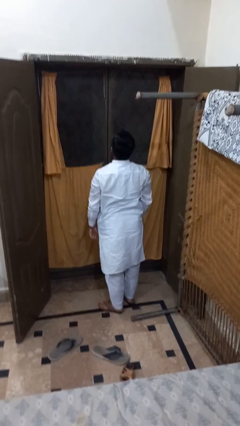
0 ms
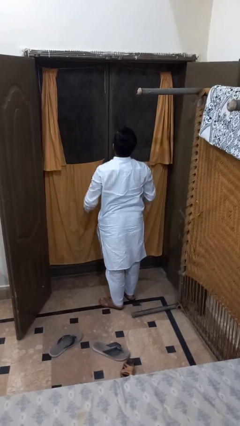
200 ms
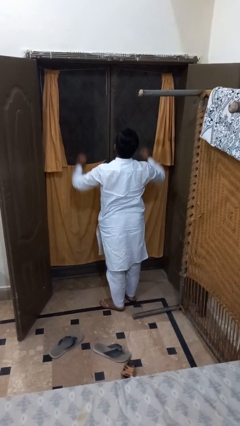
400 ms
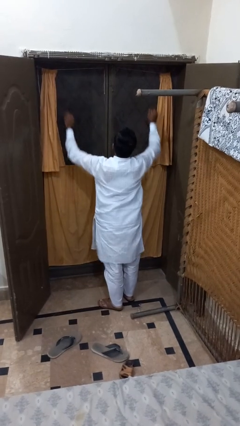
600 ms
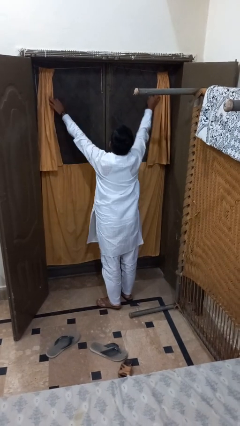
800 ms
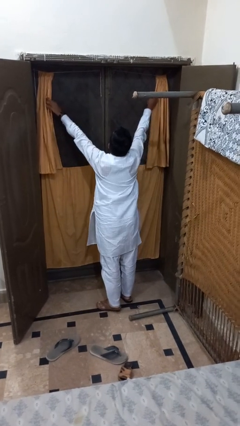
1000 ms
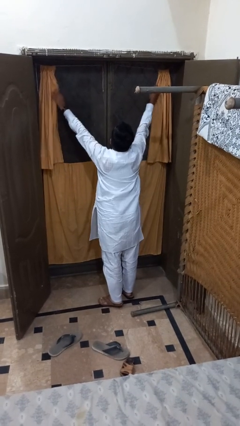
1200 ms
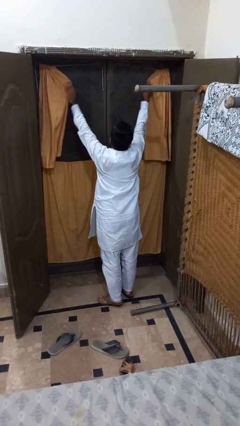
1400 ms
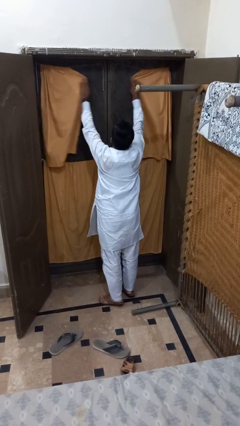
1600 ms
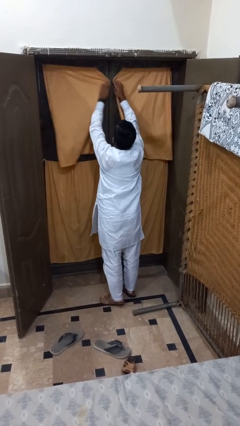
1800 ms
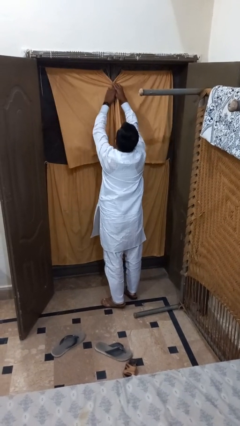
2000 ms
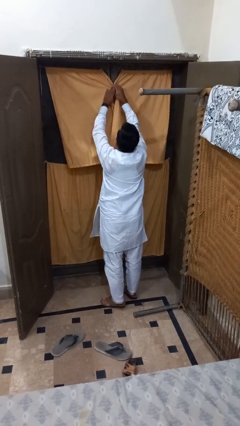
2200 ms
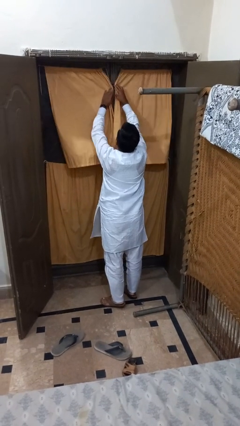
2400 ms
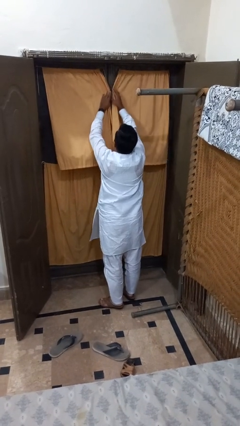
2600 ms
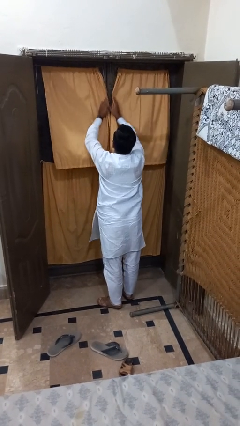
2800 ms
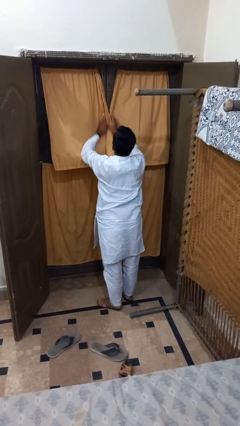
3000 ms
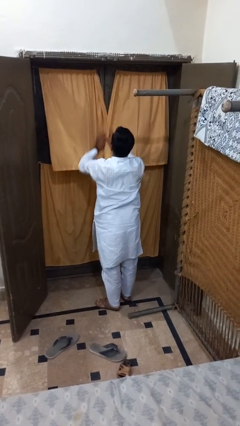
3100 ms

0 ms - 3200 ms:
person closes curtains

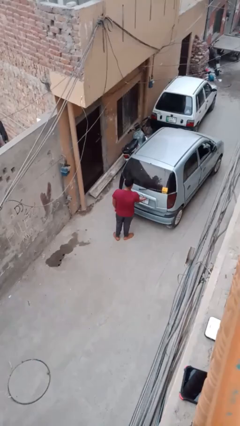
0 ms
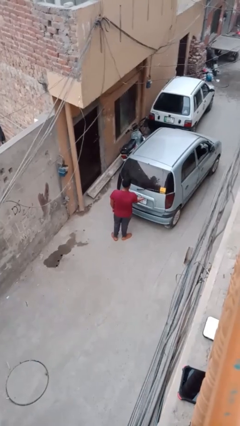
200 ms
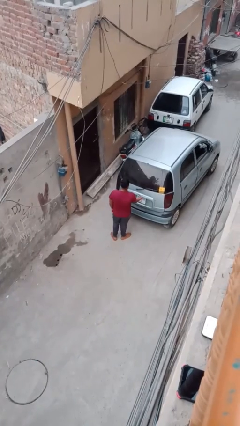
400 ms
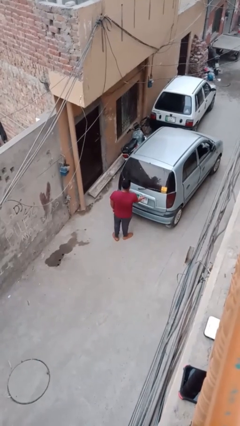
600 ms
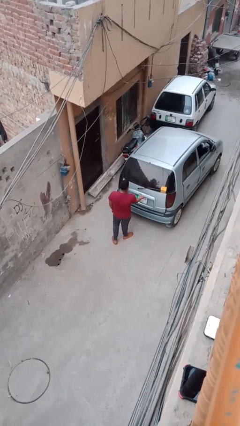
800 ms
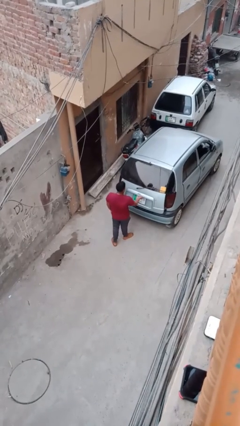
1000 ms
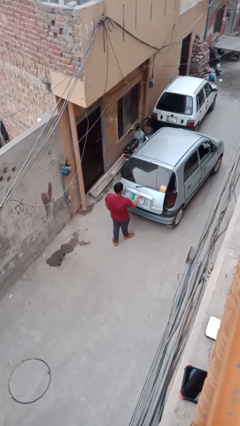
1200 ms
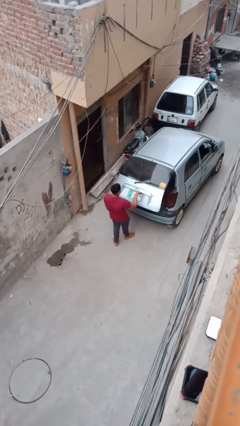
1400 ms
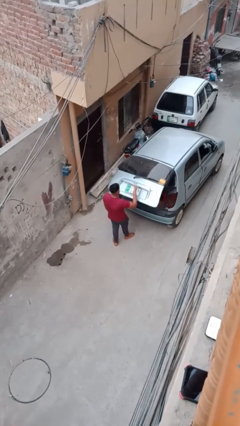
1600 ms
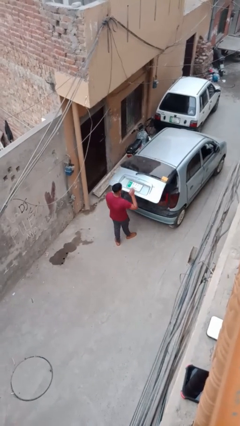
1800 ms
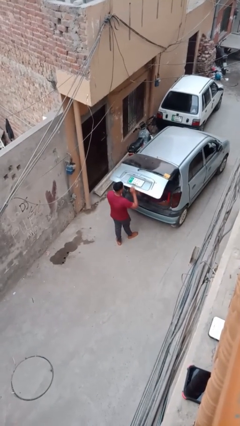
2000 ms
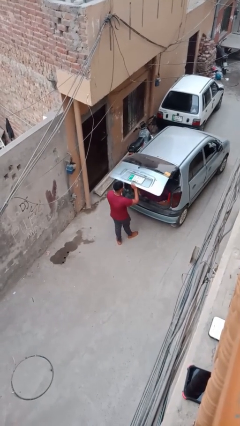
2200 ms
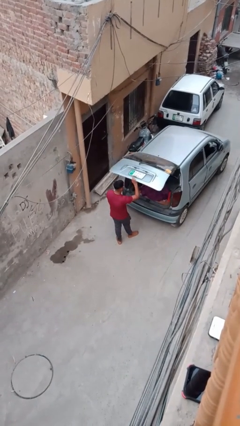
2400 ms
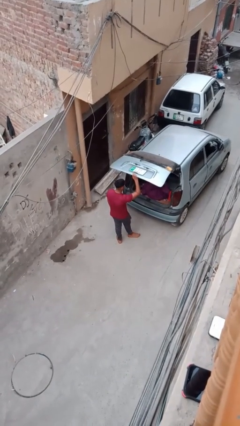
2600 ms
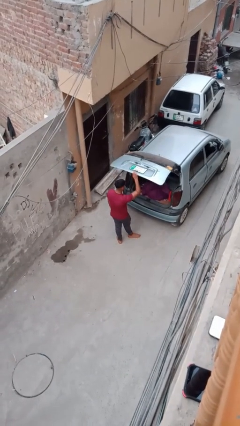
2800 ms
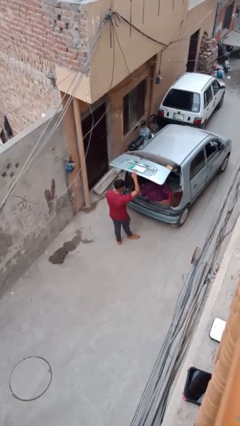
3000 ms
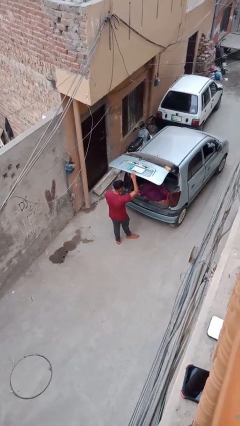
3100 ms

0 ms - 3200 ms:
person opens car trunk

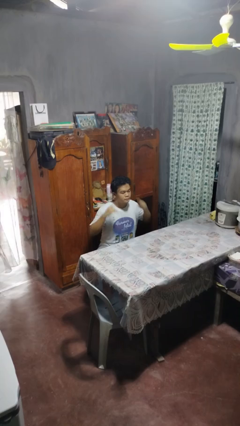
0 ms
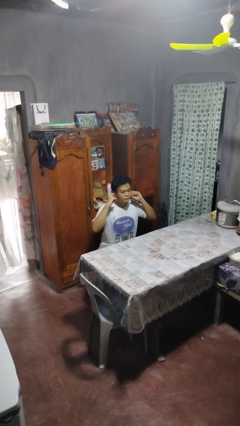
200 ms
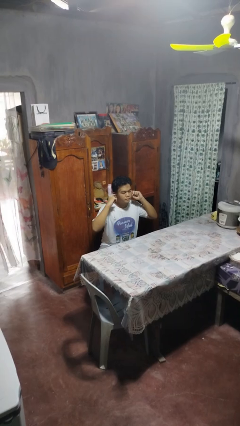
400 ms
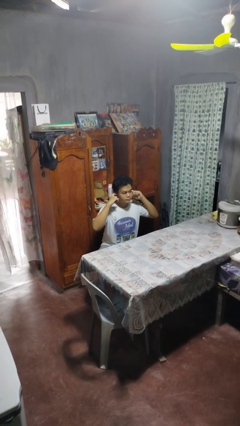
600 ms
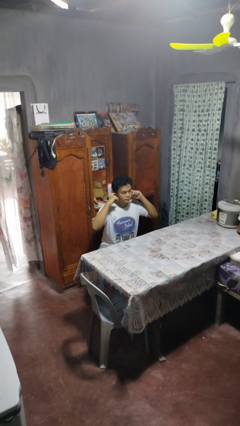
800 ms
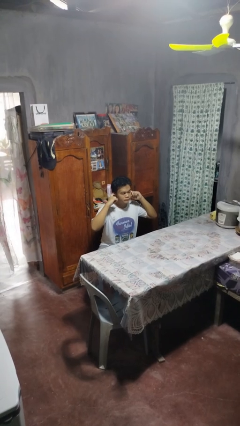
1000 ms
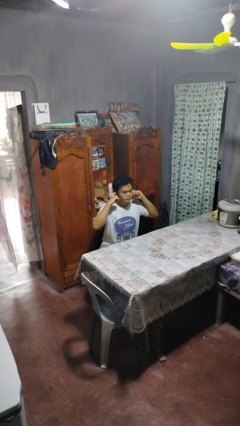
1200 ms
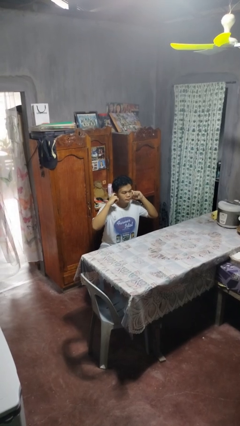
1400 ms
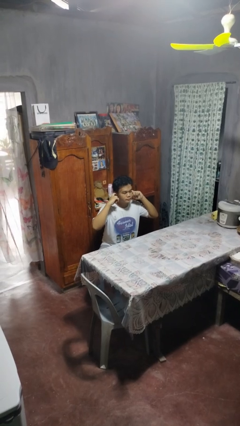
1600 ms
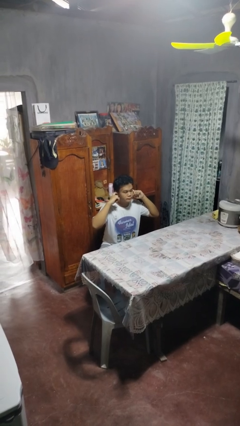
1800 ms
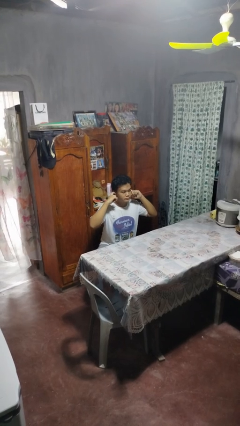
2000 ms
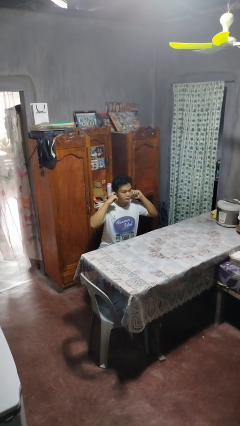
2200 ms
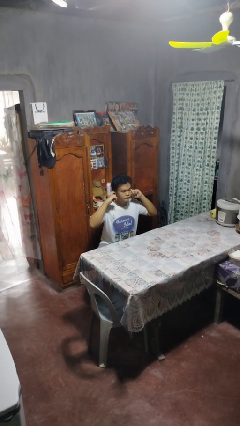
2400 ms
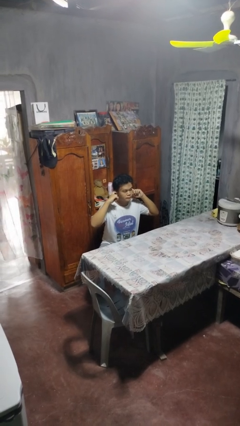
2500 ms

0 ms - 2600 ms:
person puts fingers in ear

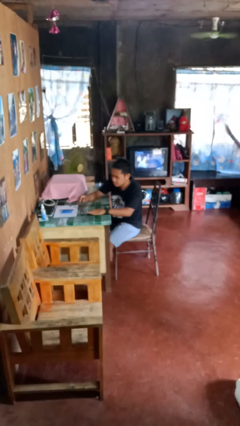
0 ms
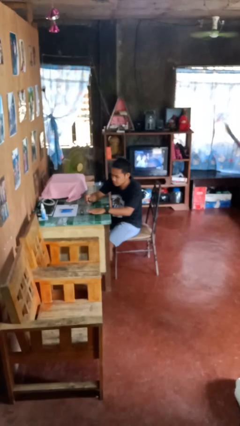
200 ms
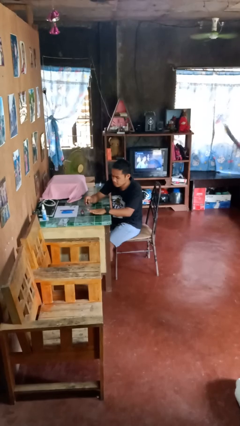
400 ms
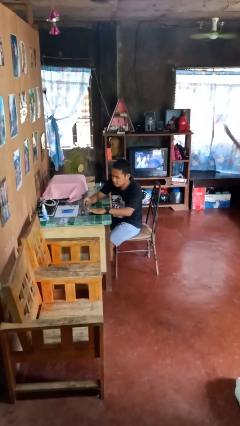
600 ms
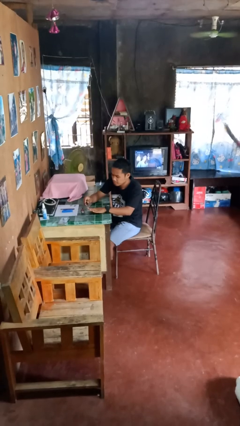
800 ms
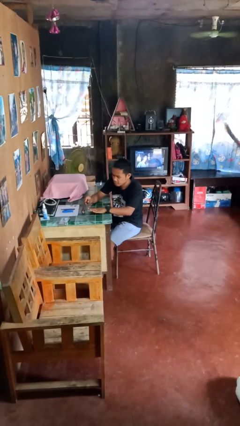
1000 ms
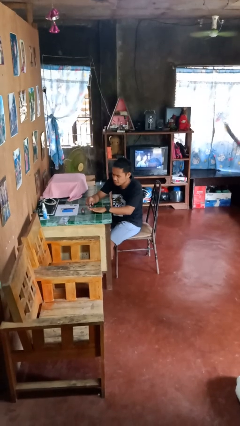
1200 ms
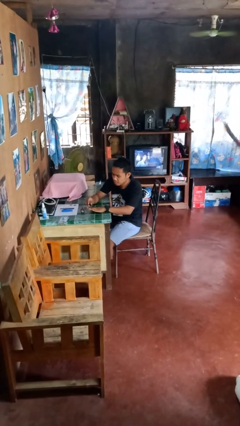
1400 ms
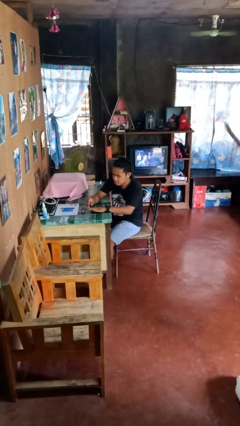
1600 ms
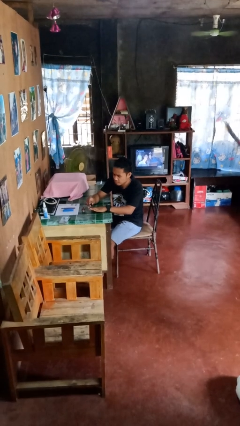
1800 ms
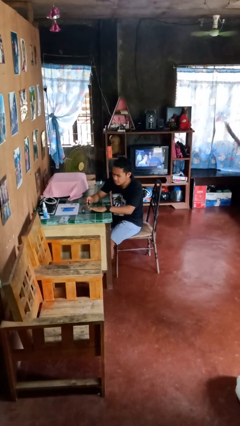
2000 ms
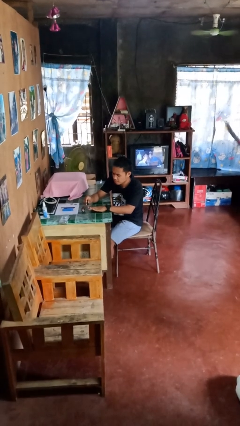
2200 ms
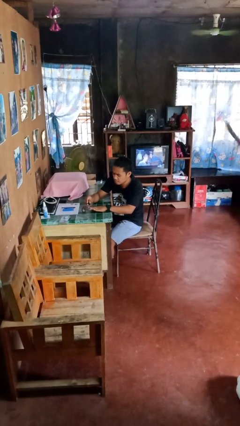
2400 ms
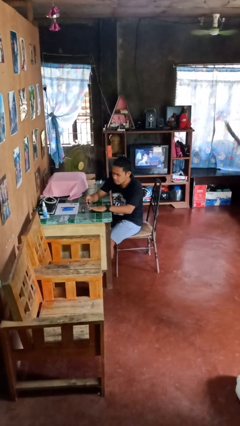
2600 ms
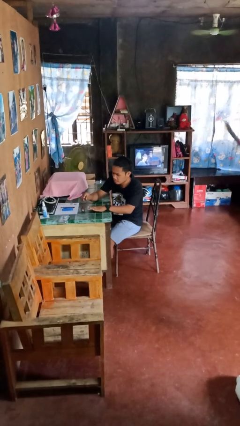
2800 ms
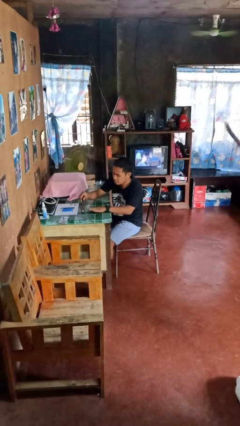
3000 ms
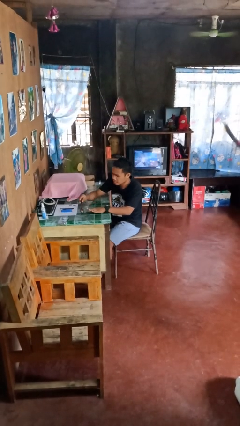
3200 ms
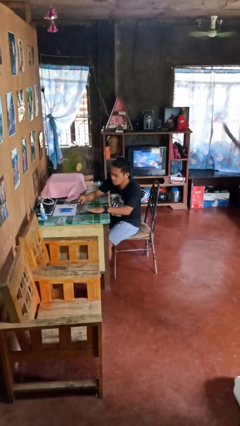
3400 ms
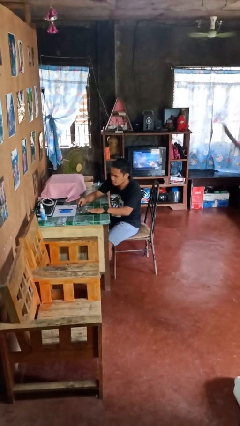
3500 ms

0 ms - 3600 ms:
person paints fingernails

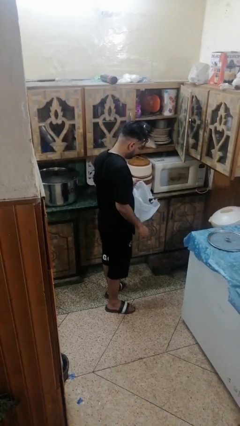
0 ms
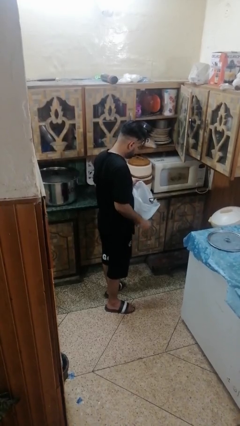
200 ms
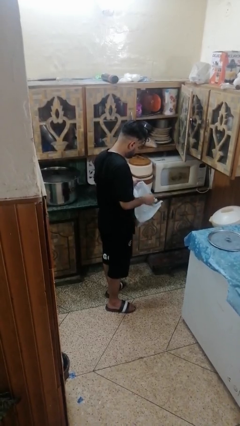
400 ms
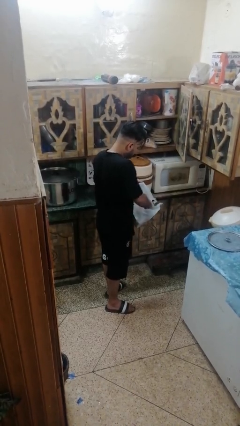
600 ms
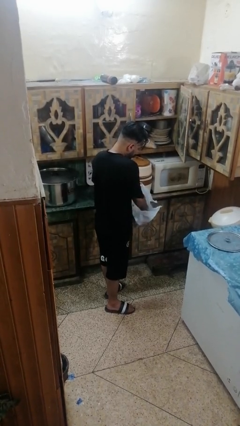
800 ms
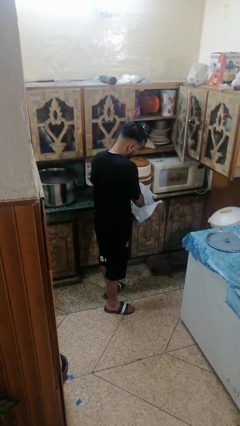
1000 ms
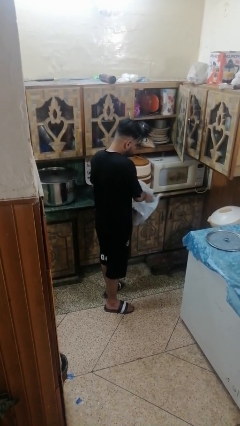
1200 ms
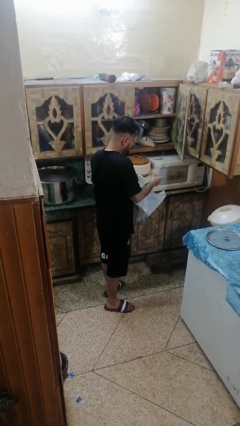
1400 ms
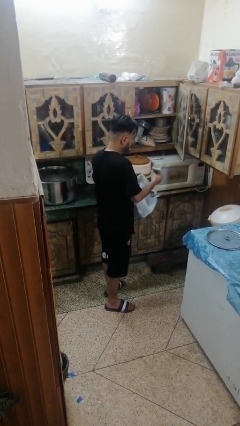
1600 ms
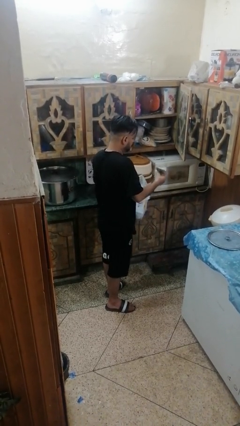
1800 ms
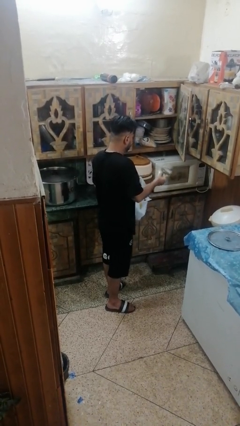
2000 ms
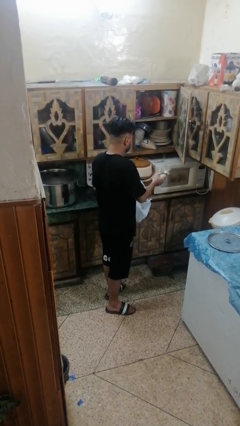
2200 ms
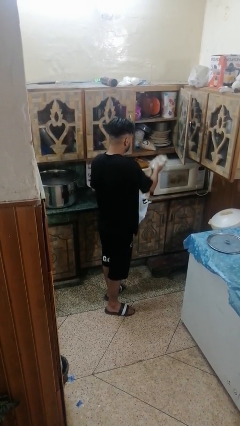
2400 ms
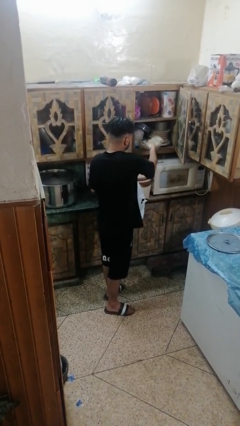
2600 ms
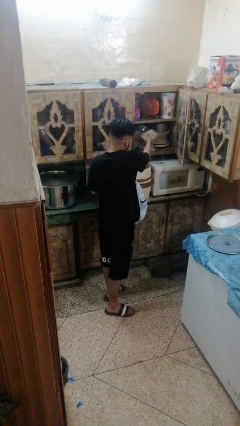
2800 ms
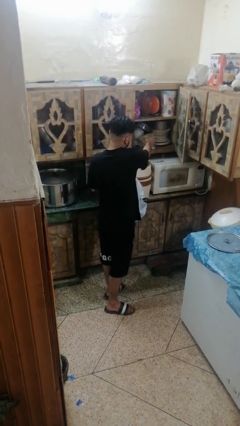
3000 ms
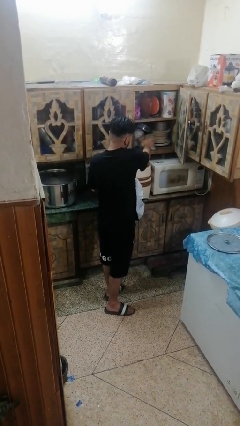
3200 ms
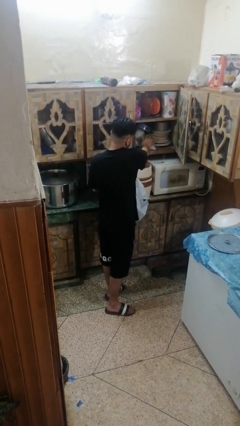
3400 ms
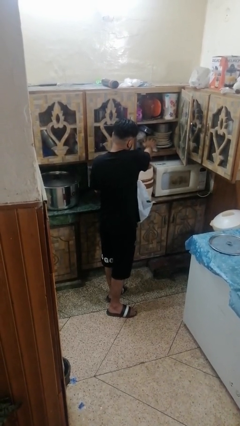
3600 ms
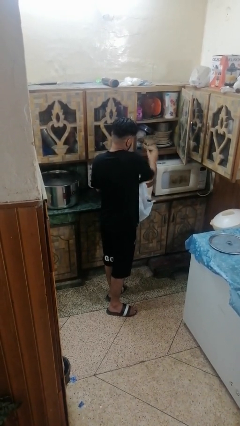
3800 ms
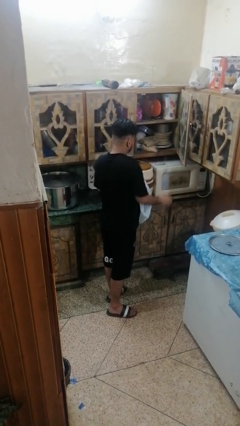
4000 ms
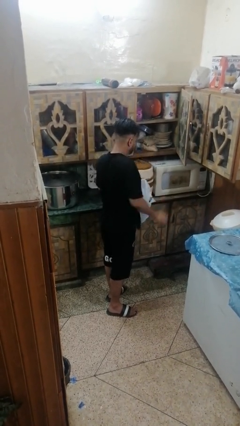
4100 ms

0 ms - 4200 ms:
person loads groceries into cabinet

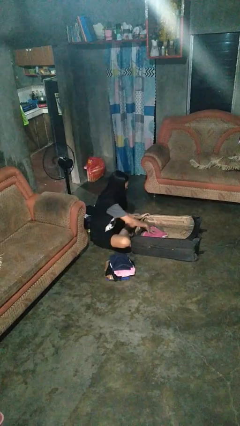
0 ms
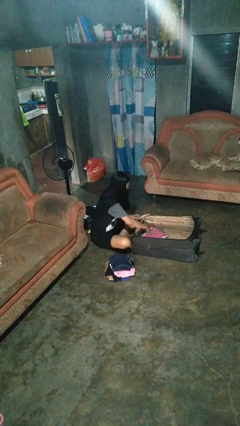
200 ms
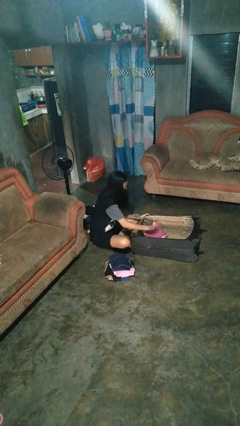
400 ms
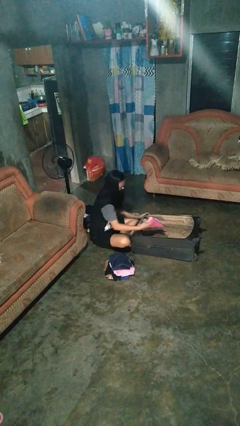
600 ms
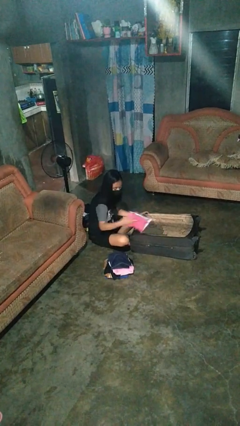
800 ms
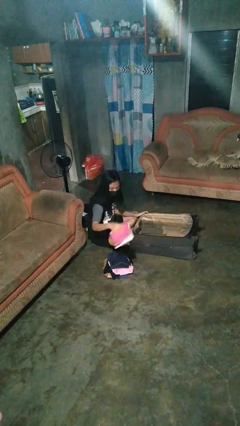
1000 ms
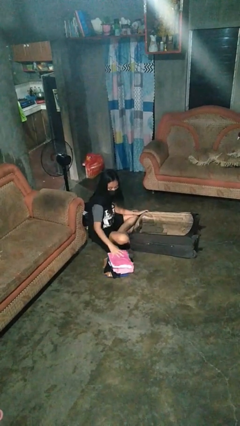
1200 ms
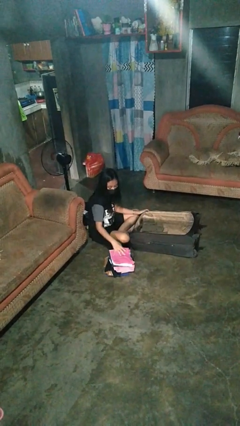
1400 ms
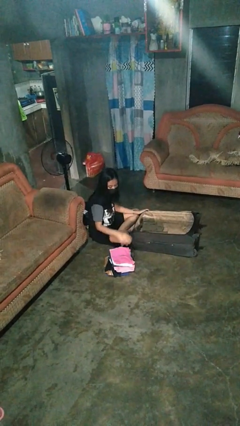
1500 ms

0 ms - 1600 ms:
person unloads clothes from suitcase
